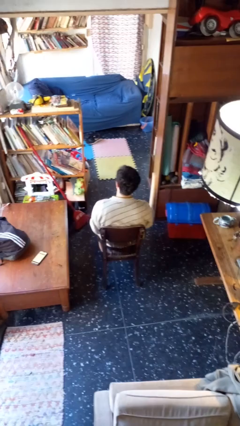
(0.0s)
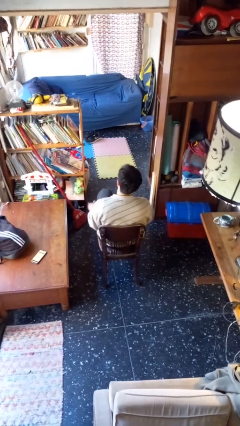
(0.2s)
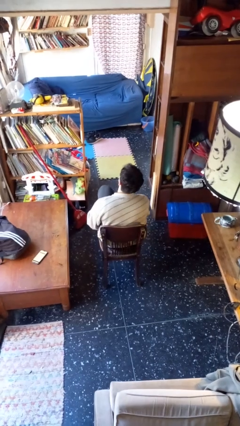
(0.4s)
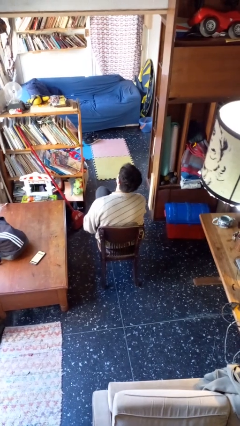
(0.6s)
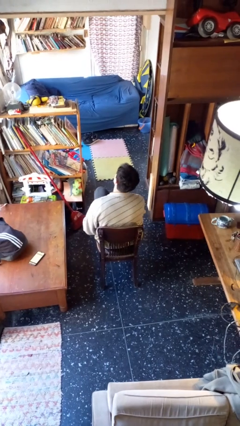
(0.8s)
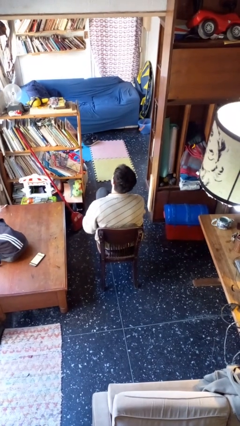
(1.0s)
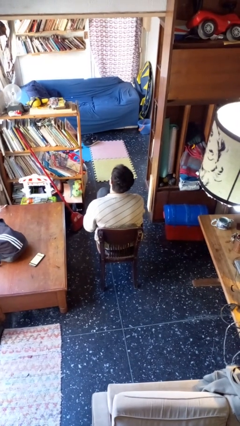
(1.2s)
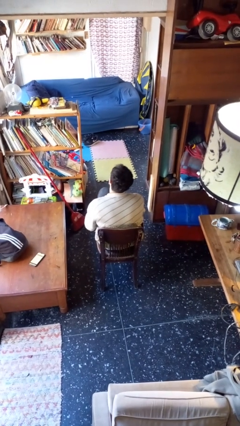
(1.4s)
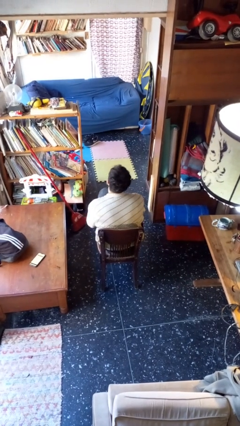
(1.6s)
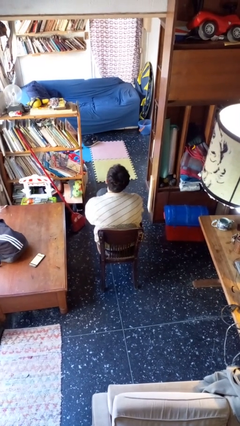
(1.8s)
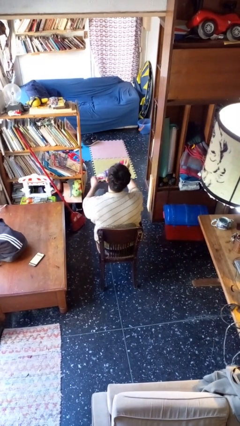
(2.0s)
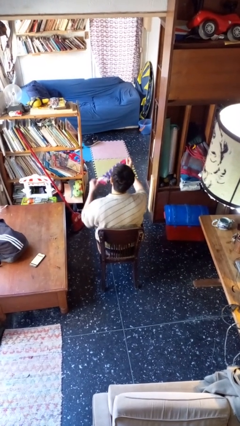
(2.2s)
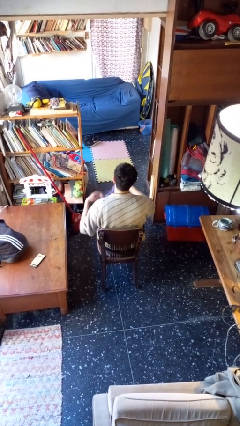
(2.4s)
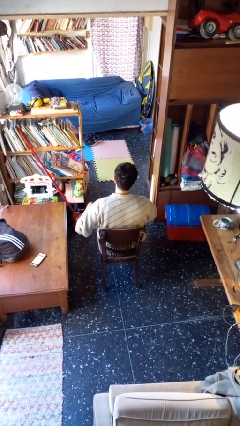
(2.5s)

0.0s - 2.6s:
person takes off socks

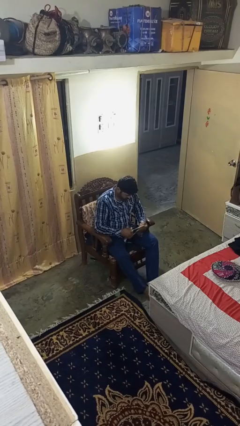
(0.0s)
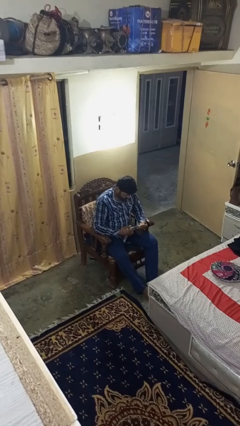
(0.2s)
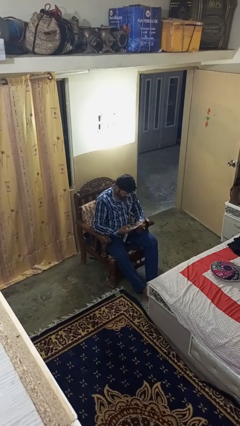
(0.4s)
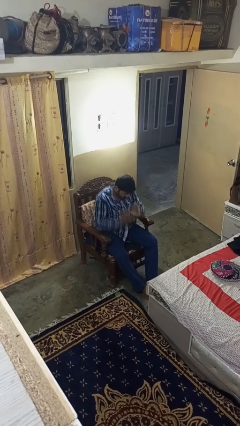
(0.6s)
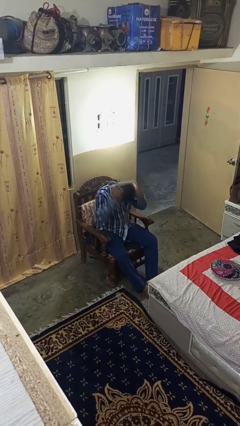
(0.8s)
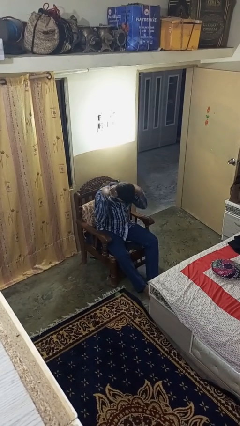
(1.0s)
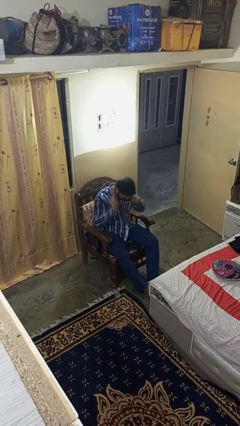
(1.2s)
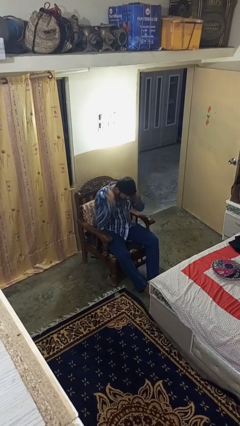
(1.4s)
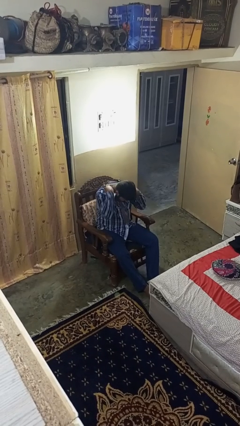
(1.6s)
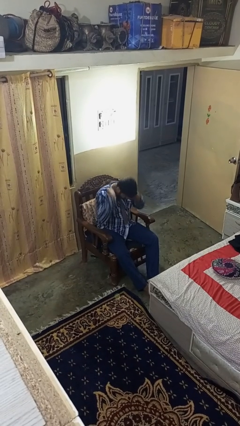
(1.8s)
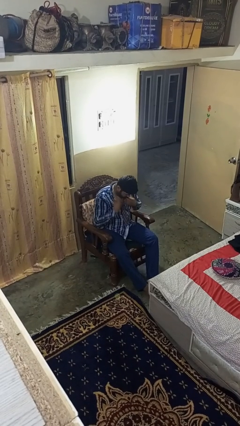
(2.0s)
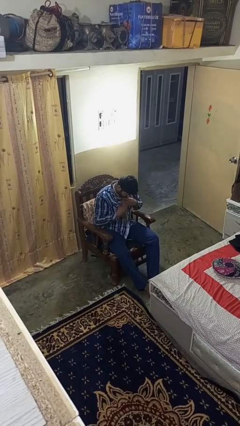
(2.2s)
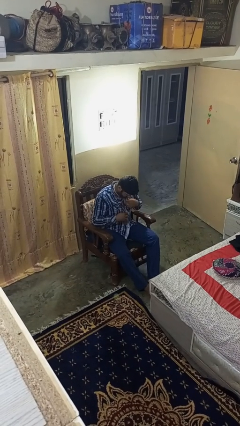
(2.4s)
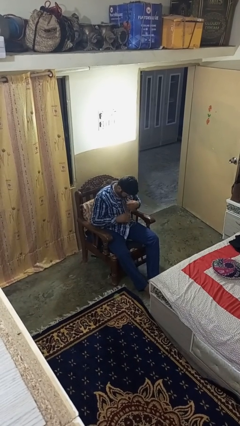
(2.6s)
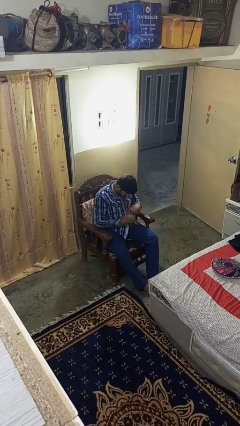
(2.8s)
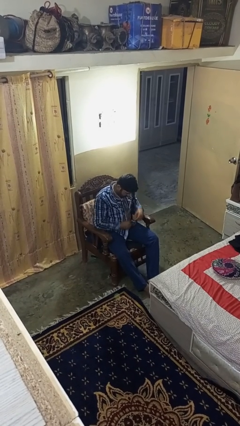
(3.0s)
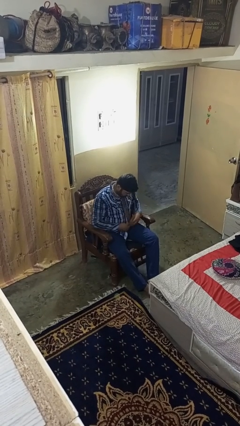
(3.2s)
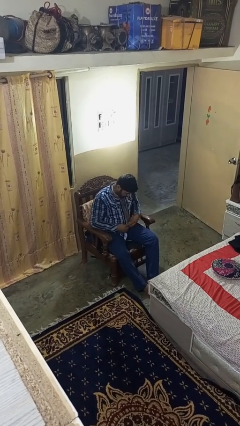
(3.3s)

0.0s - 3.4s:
person puts on necktie

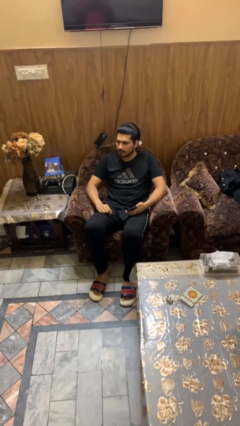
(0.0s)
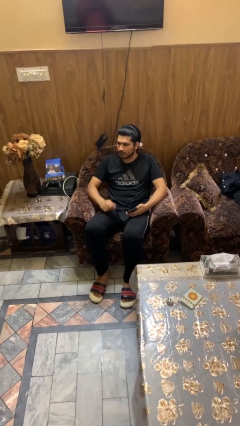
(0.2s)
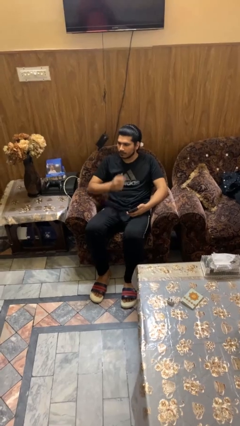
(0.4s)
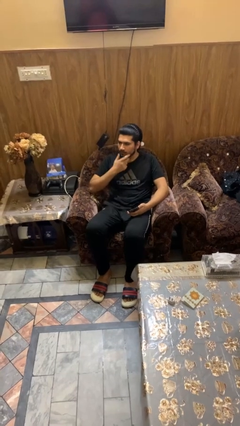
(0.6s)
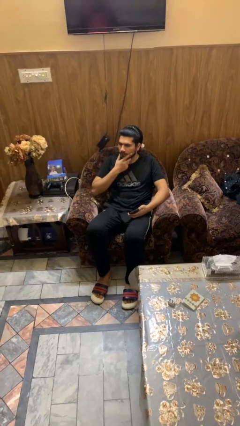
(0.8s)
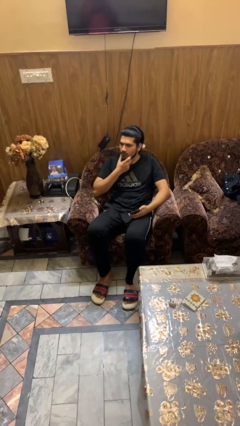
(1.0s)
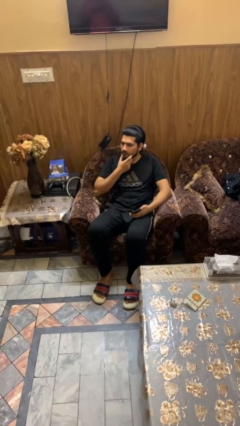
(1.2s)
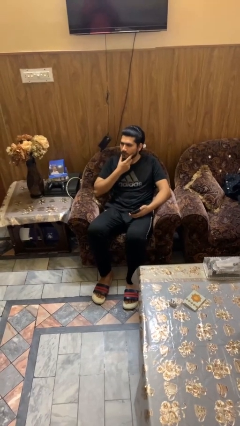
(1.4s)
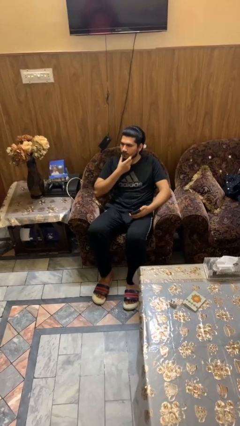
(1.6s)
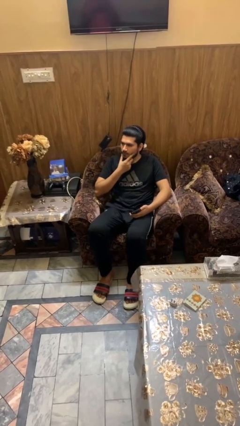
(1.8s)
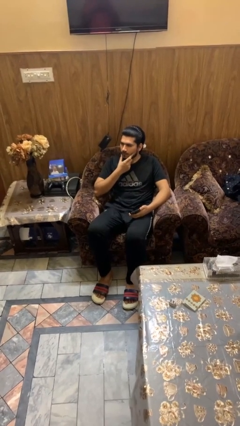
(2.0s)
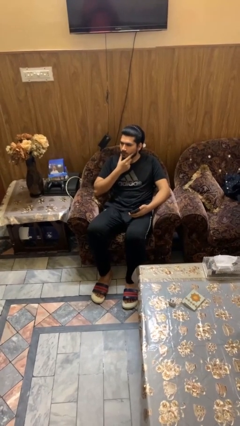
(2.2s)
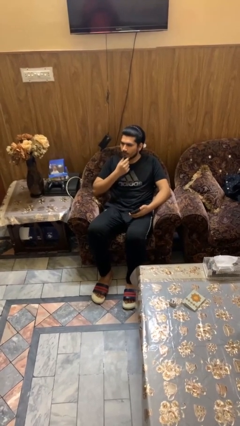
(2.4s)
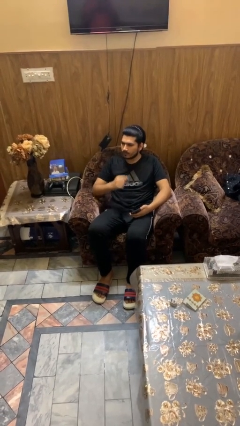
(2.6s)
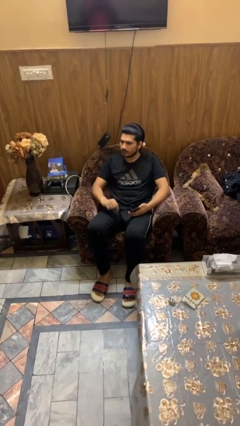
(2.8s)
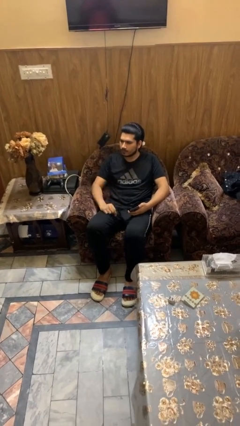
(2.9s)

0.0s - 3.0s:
person strokes chin

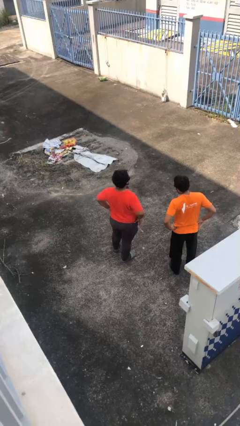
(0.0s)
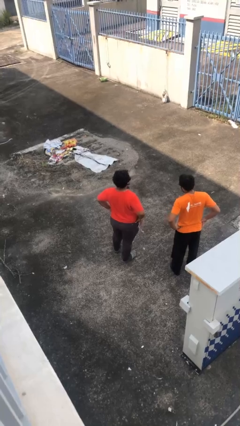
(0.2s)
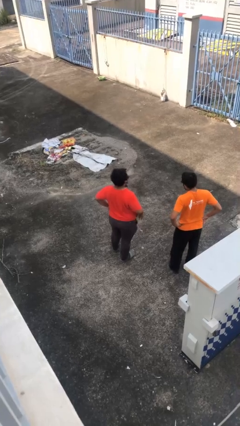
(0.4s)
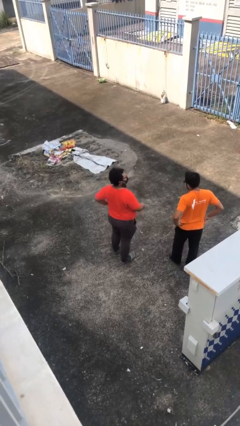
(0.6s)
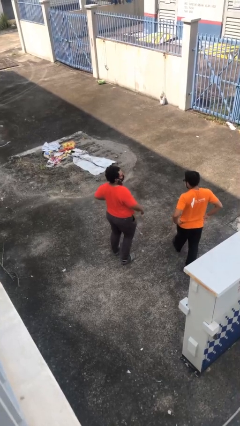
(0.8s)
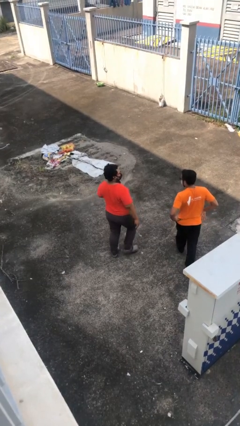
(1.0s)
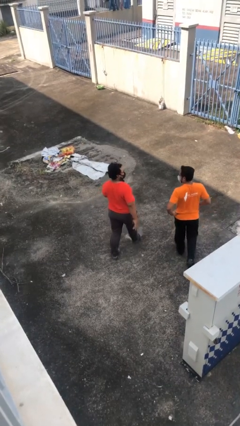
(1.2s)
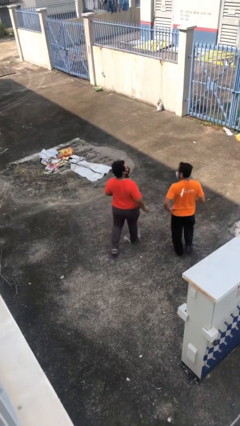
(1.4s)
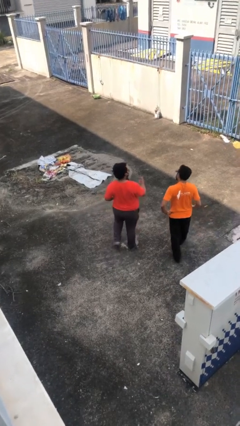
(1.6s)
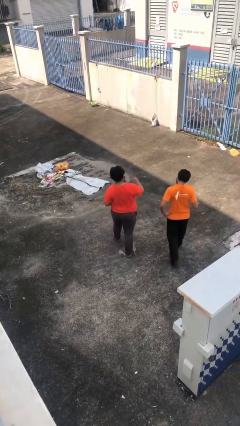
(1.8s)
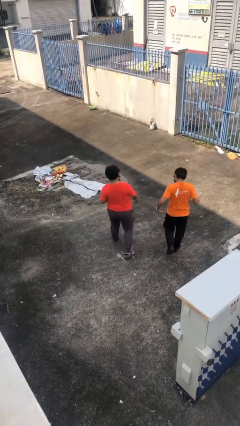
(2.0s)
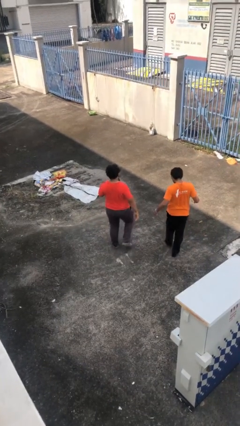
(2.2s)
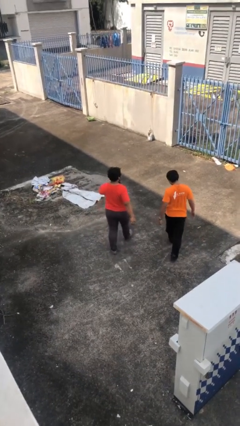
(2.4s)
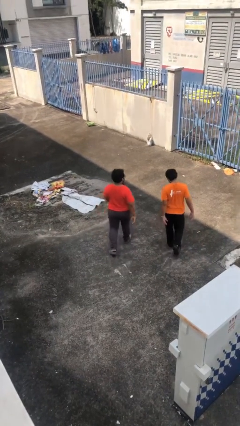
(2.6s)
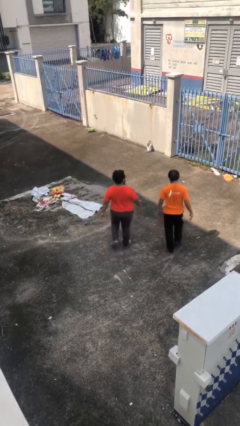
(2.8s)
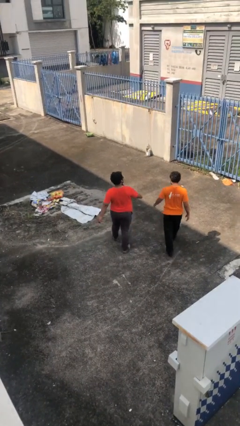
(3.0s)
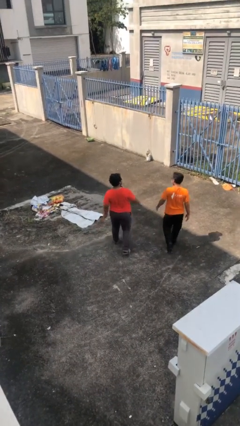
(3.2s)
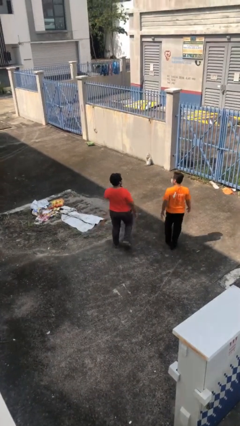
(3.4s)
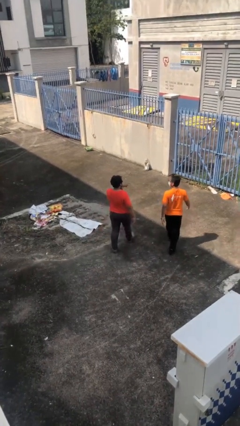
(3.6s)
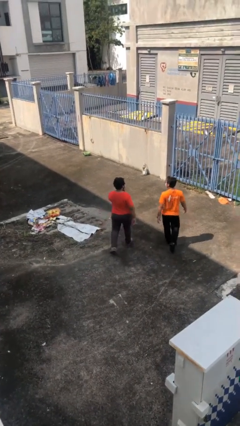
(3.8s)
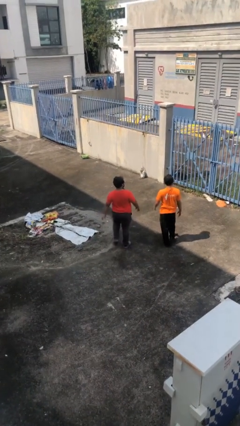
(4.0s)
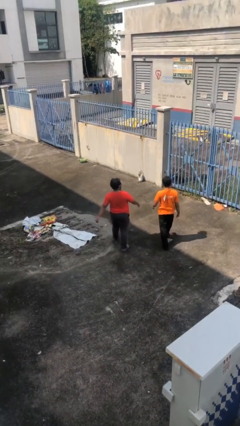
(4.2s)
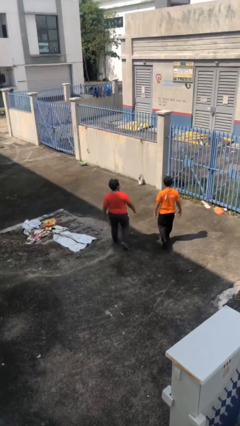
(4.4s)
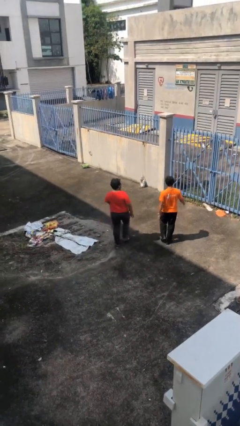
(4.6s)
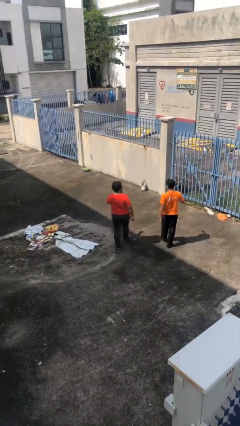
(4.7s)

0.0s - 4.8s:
person talks to person

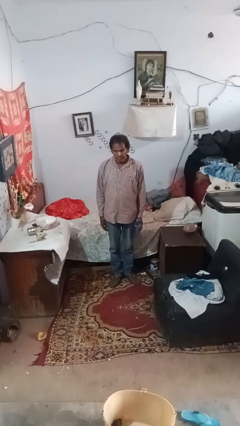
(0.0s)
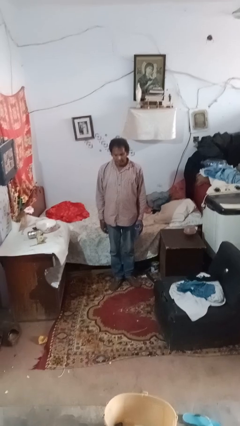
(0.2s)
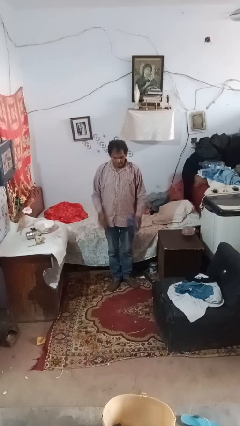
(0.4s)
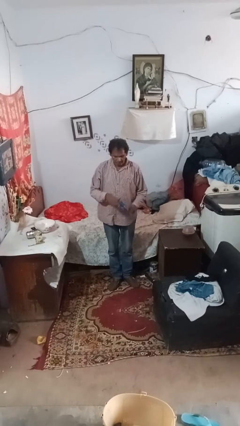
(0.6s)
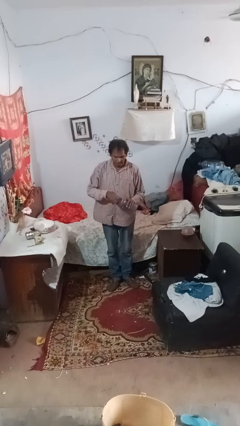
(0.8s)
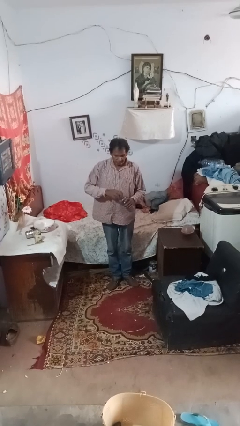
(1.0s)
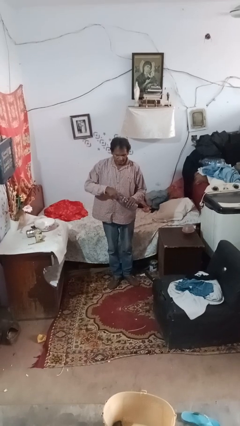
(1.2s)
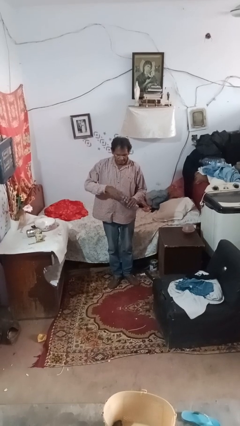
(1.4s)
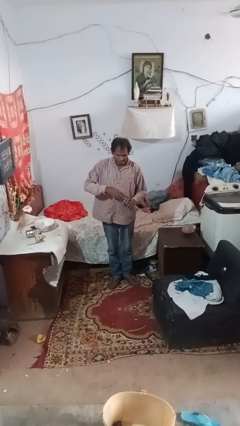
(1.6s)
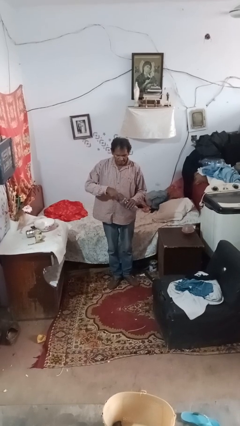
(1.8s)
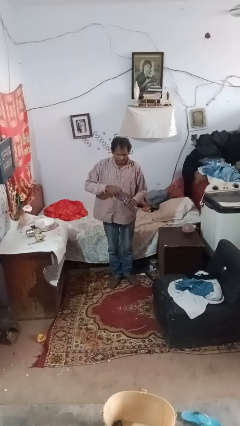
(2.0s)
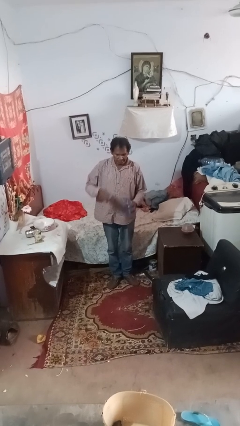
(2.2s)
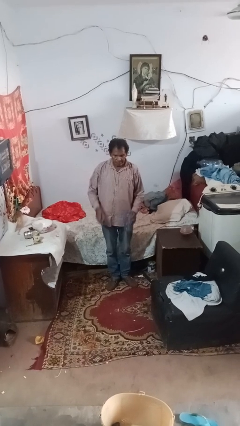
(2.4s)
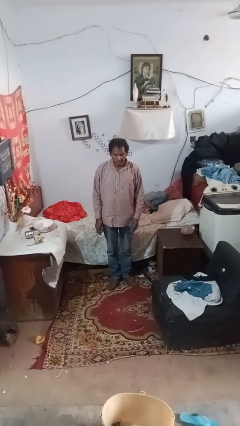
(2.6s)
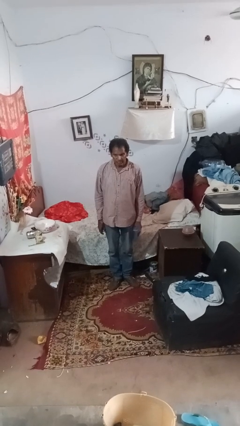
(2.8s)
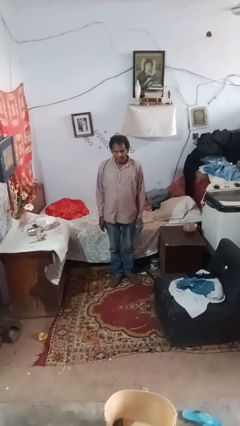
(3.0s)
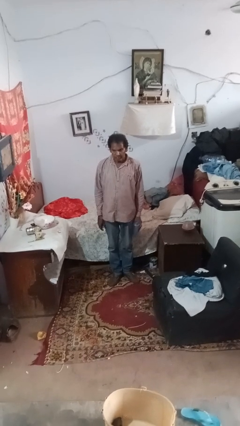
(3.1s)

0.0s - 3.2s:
person unscrews lid from bottle
